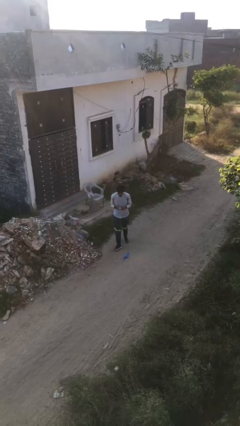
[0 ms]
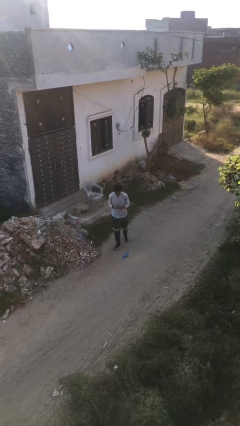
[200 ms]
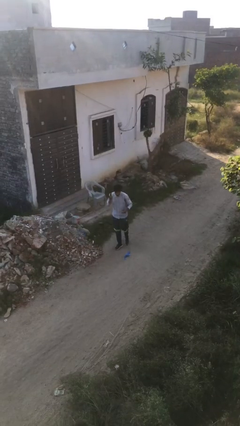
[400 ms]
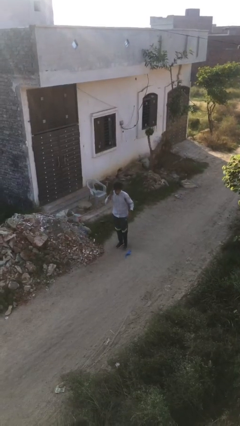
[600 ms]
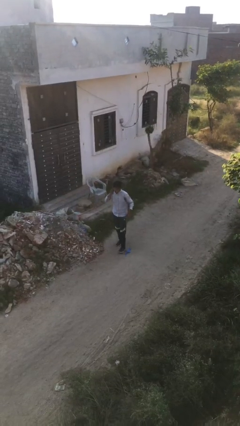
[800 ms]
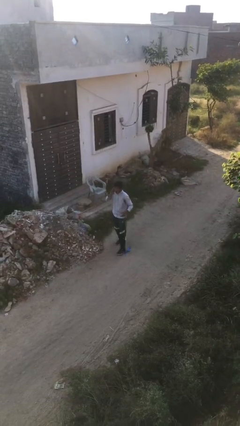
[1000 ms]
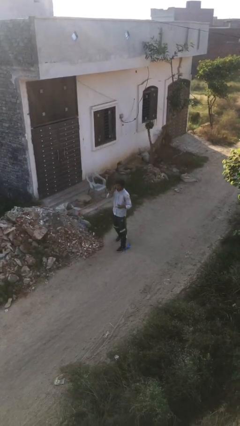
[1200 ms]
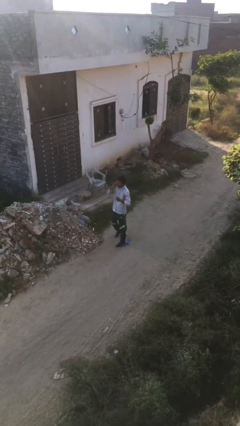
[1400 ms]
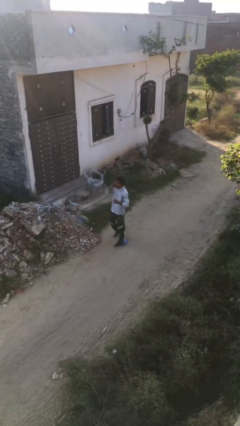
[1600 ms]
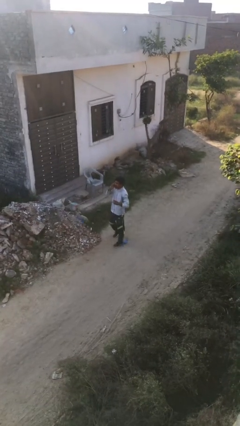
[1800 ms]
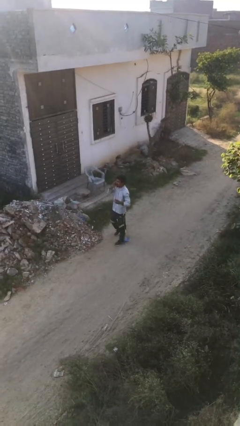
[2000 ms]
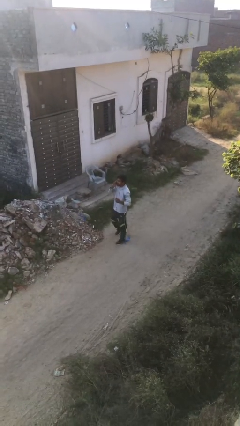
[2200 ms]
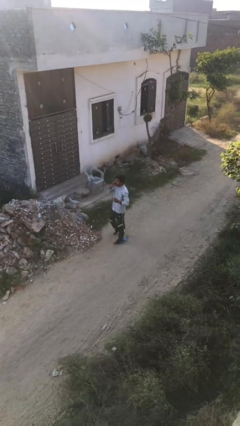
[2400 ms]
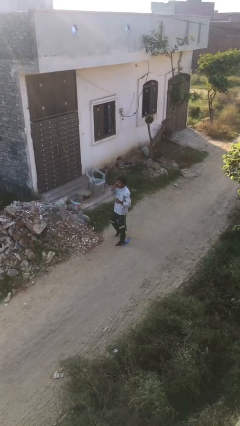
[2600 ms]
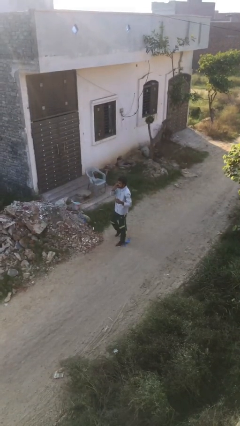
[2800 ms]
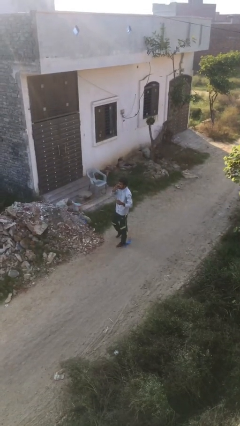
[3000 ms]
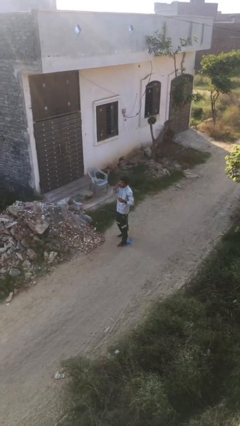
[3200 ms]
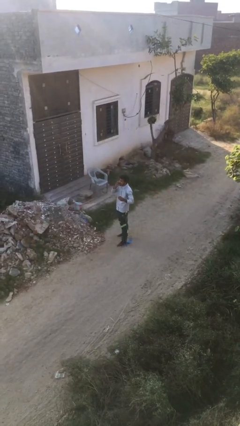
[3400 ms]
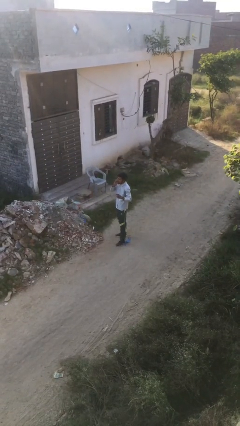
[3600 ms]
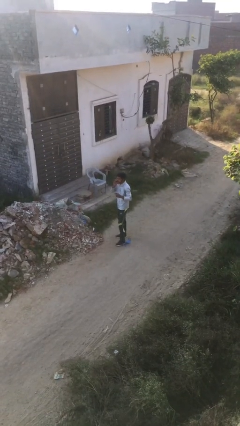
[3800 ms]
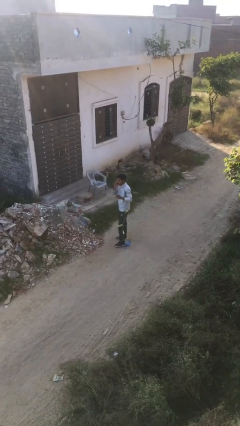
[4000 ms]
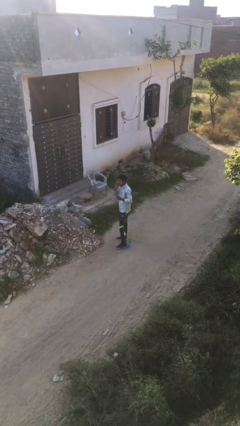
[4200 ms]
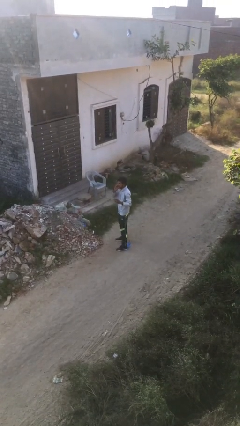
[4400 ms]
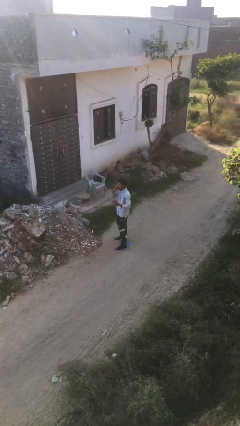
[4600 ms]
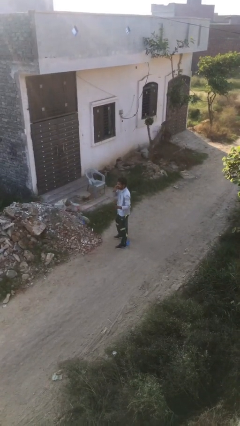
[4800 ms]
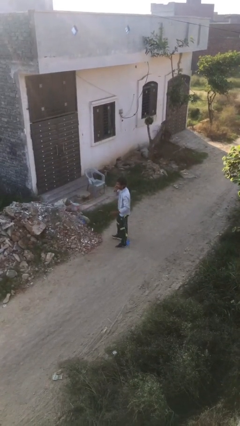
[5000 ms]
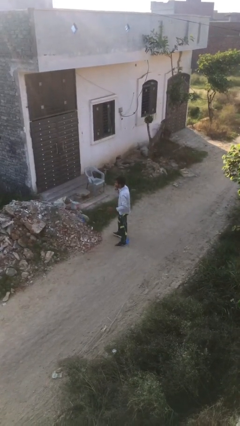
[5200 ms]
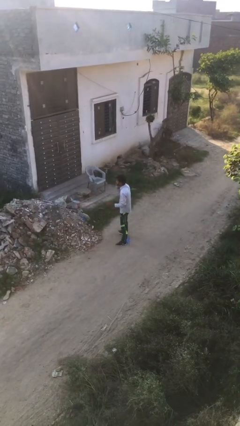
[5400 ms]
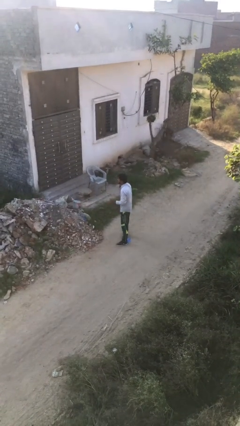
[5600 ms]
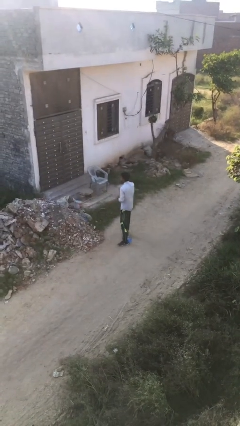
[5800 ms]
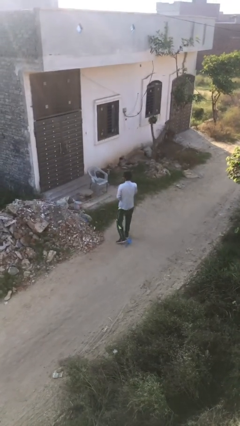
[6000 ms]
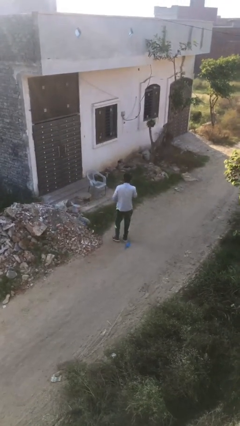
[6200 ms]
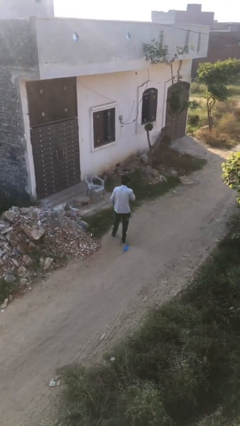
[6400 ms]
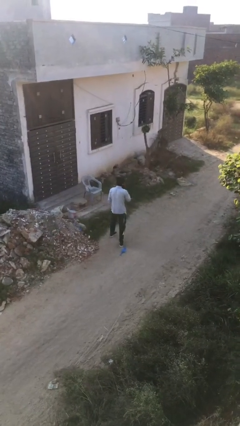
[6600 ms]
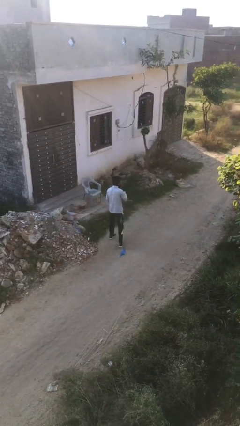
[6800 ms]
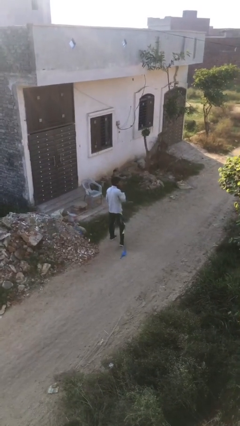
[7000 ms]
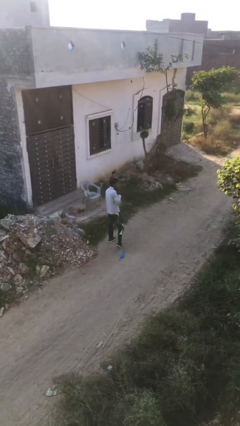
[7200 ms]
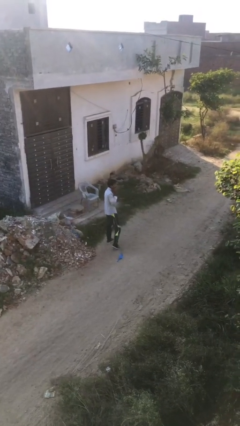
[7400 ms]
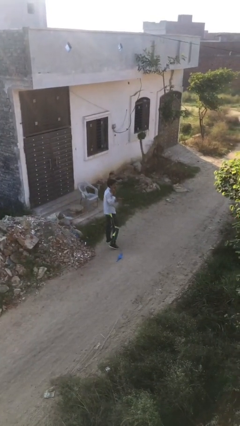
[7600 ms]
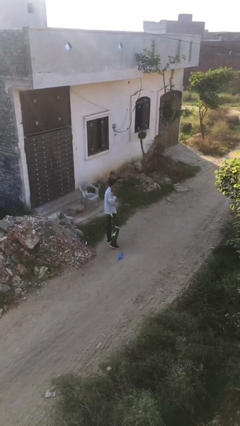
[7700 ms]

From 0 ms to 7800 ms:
person talks on phone

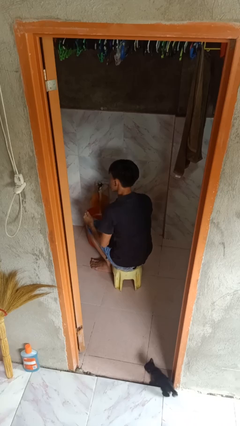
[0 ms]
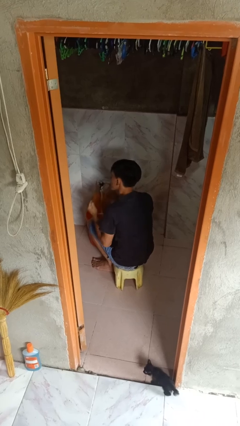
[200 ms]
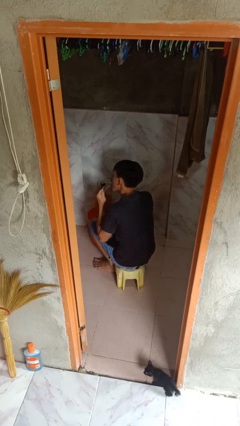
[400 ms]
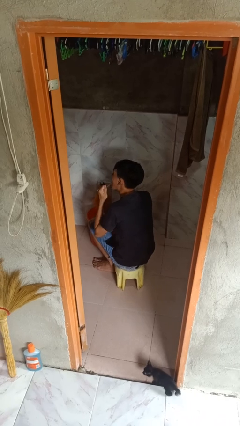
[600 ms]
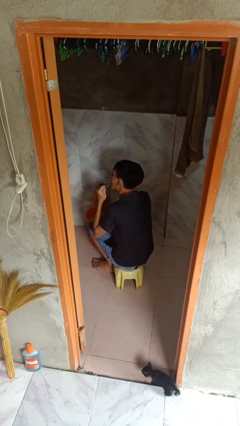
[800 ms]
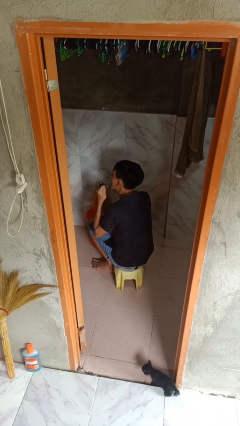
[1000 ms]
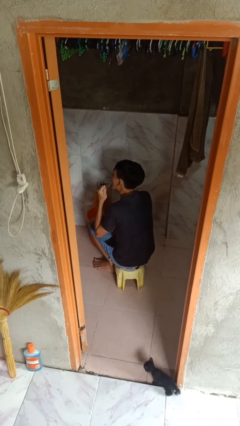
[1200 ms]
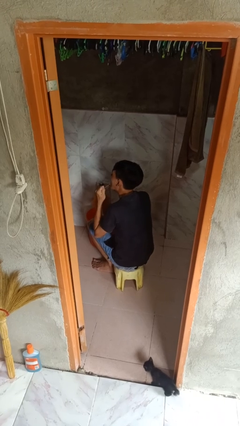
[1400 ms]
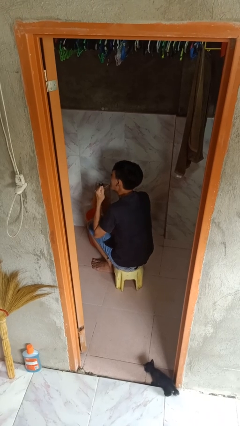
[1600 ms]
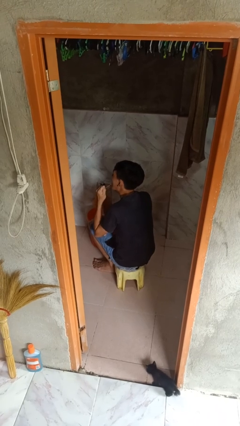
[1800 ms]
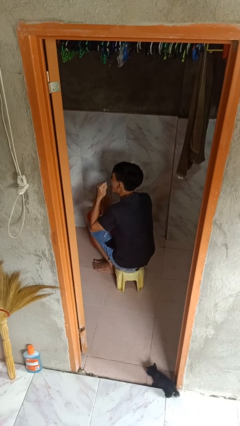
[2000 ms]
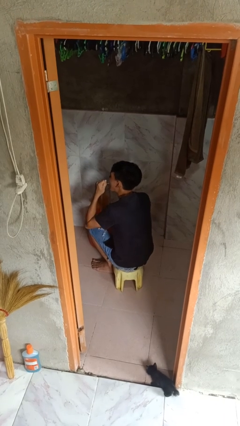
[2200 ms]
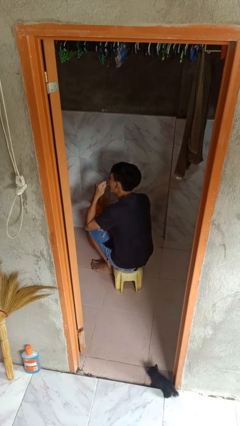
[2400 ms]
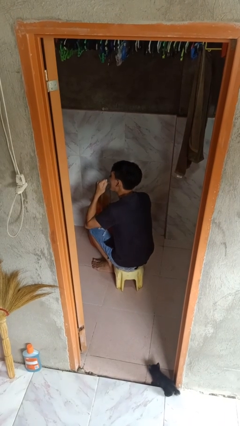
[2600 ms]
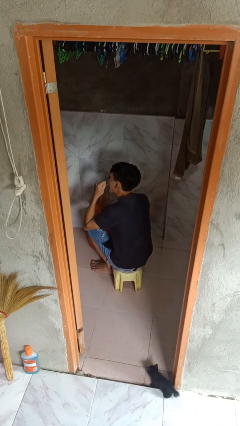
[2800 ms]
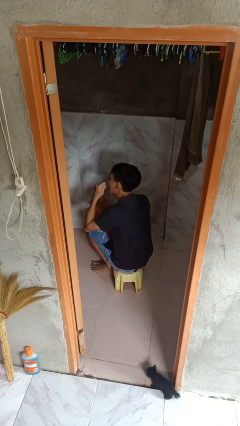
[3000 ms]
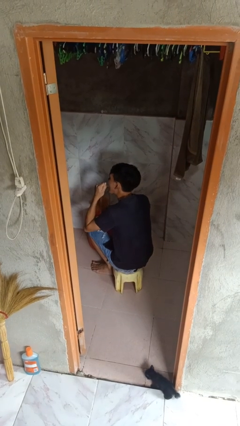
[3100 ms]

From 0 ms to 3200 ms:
person flosses

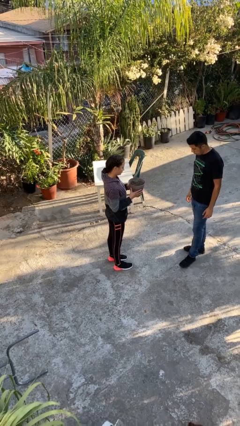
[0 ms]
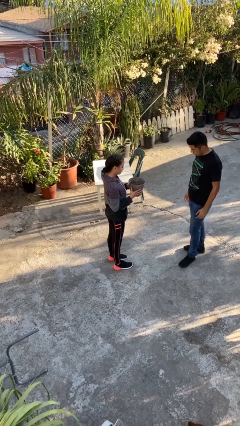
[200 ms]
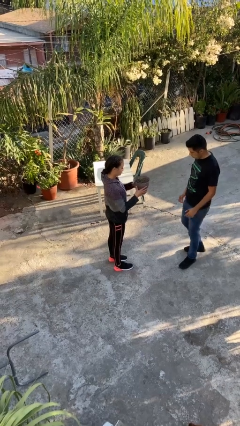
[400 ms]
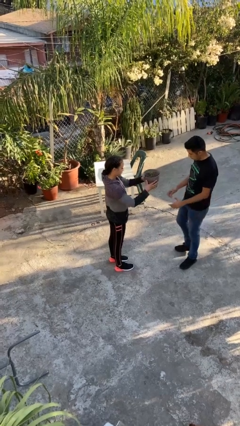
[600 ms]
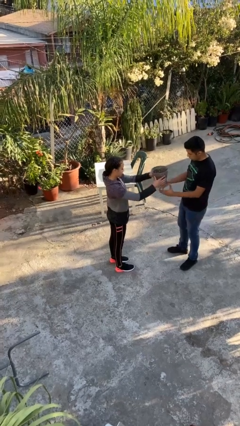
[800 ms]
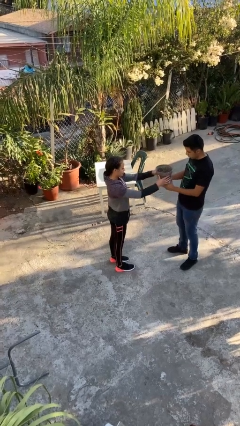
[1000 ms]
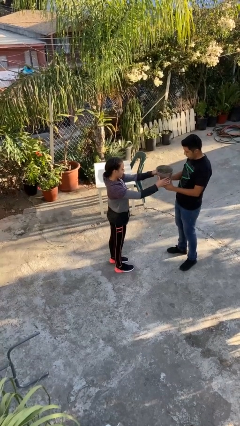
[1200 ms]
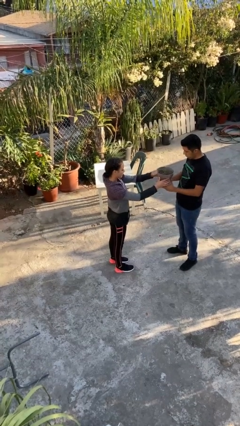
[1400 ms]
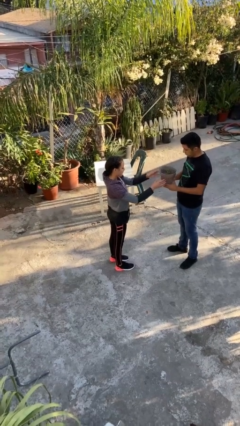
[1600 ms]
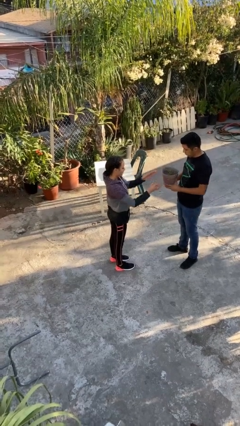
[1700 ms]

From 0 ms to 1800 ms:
person transfers object to person

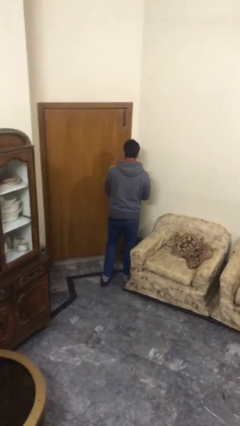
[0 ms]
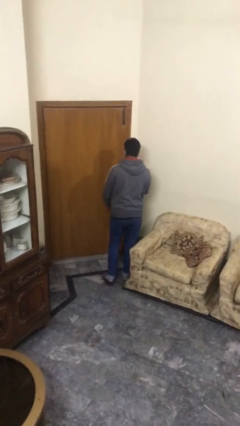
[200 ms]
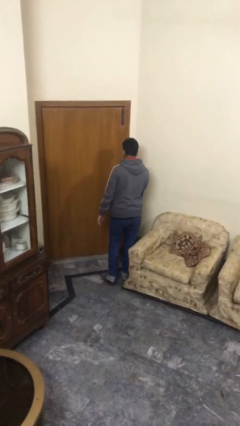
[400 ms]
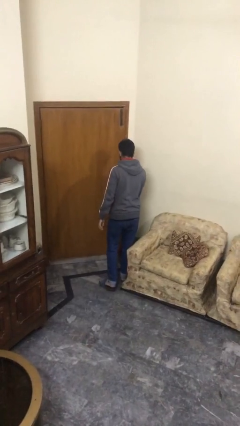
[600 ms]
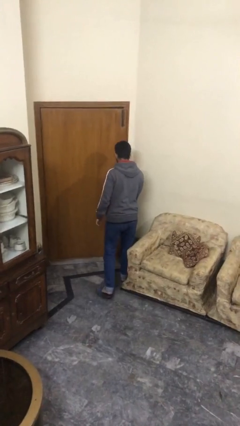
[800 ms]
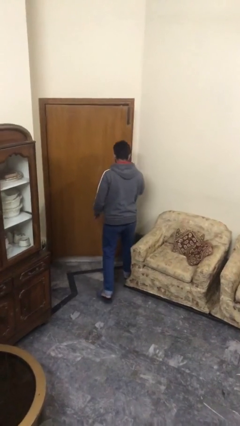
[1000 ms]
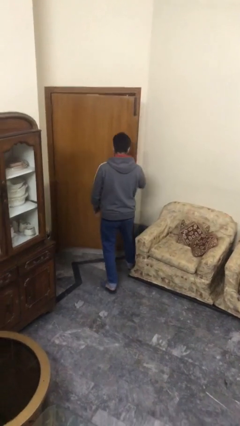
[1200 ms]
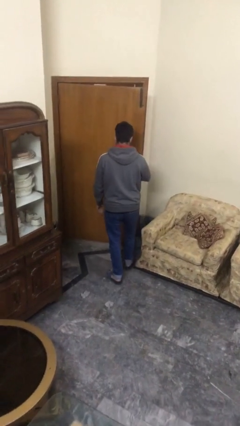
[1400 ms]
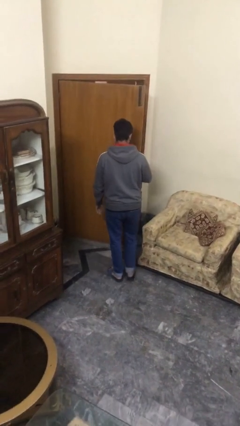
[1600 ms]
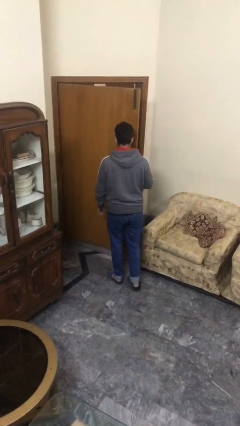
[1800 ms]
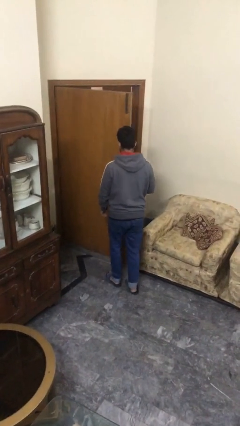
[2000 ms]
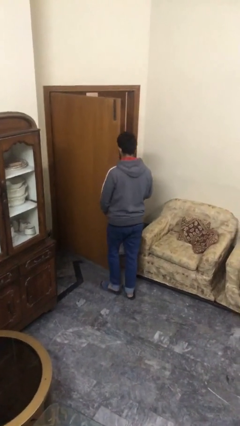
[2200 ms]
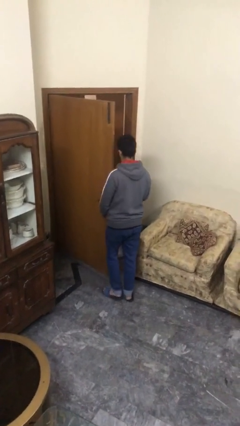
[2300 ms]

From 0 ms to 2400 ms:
person opens facility door

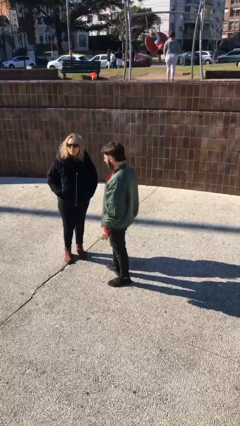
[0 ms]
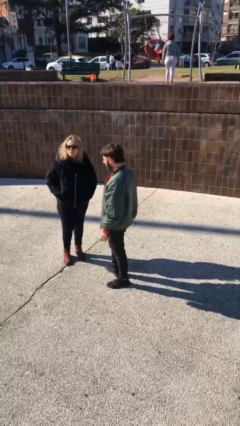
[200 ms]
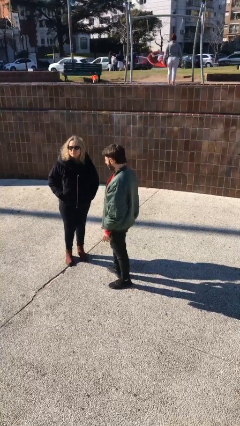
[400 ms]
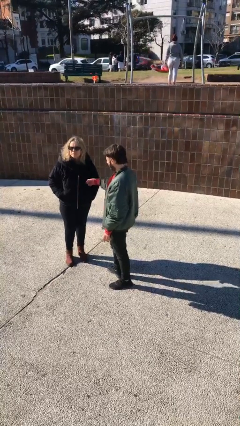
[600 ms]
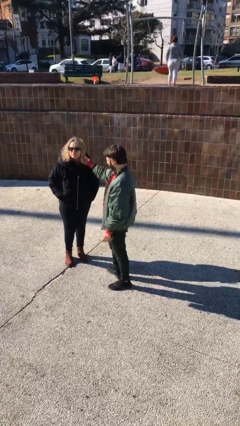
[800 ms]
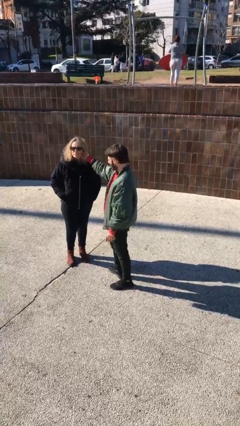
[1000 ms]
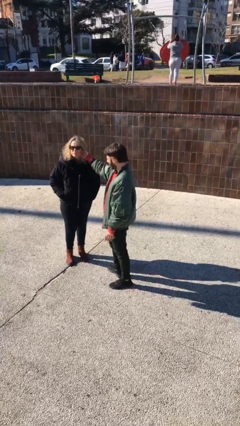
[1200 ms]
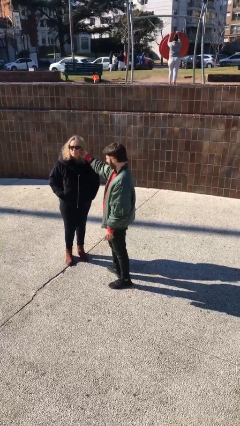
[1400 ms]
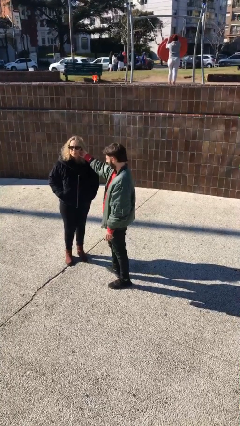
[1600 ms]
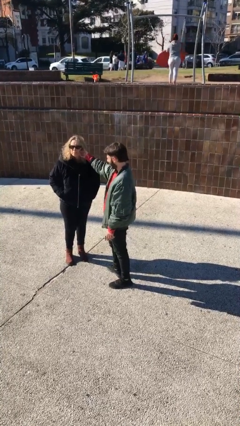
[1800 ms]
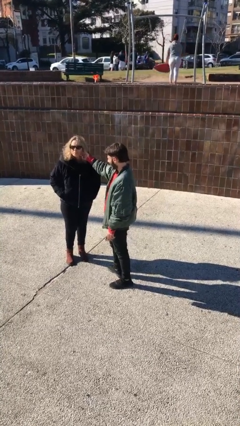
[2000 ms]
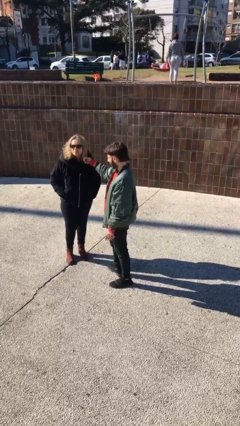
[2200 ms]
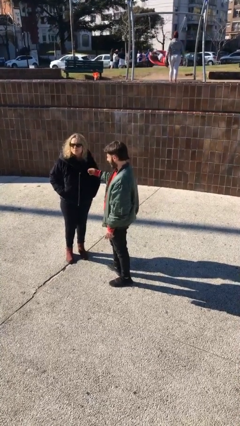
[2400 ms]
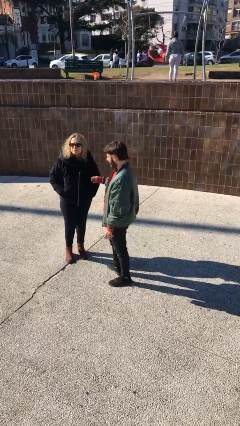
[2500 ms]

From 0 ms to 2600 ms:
person touches face of person
